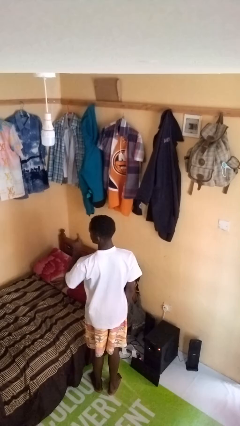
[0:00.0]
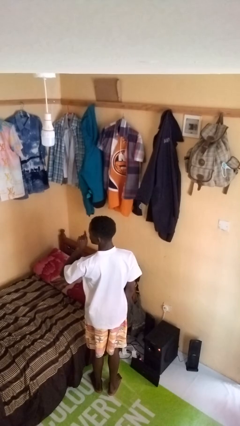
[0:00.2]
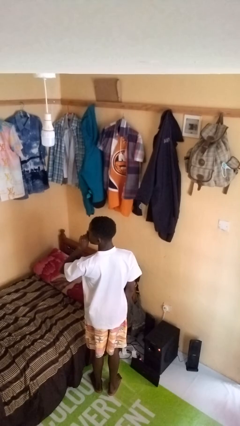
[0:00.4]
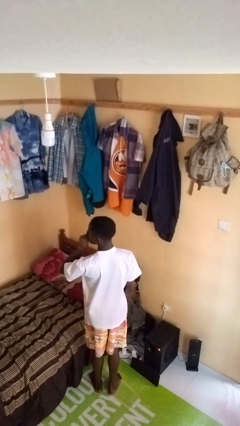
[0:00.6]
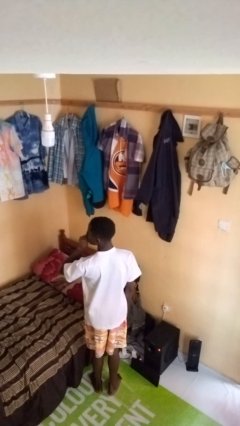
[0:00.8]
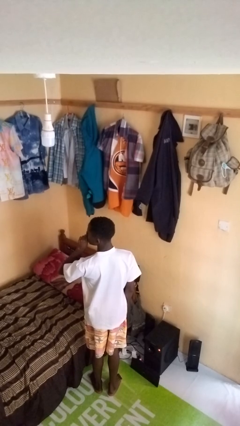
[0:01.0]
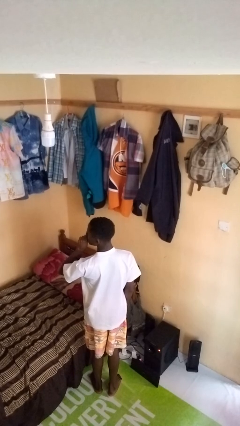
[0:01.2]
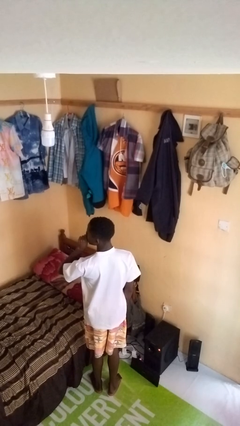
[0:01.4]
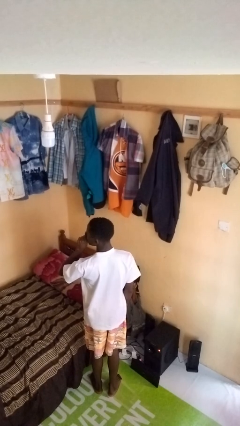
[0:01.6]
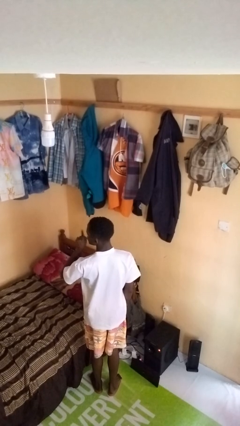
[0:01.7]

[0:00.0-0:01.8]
person gestures be quiet

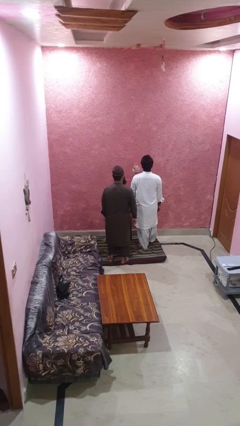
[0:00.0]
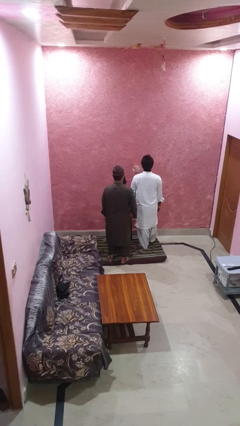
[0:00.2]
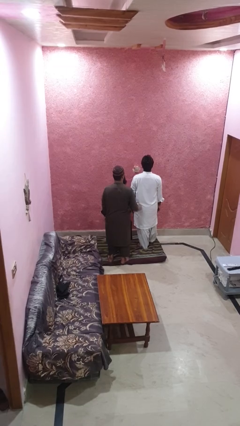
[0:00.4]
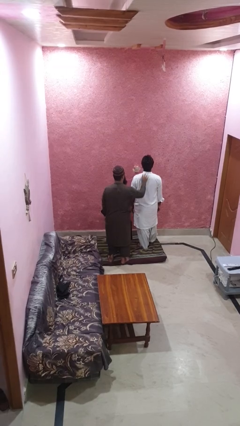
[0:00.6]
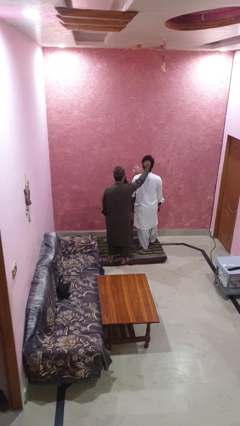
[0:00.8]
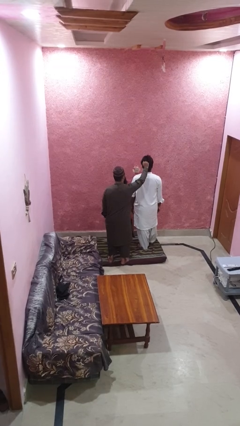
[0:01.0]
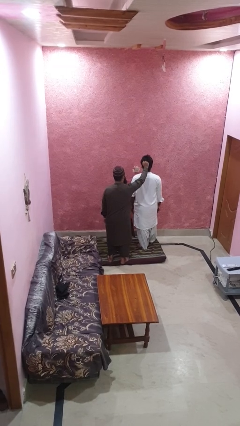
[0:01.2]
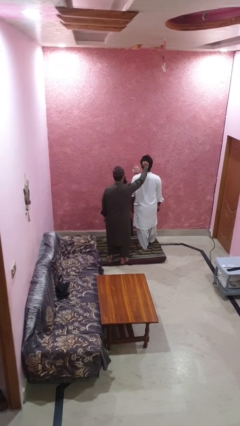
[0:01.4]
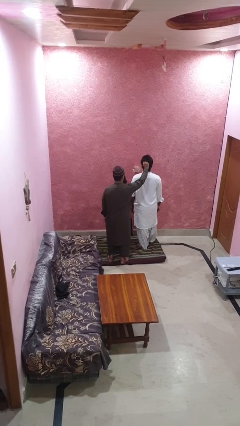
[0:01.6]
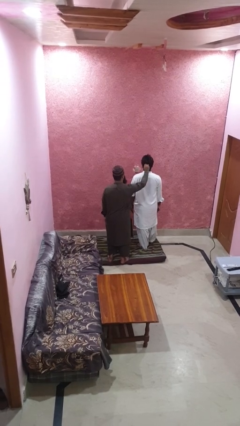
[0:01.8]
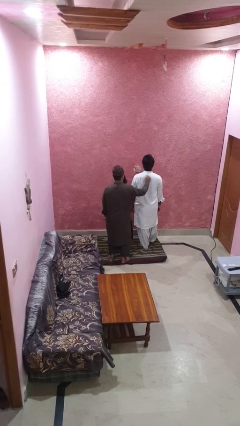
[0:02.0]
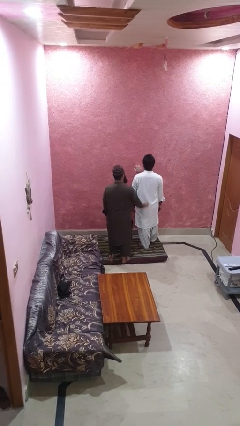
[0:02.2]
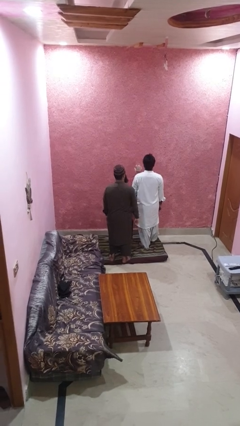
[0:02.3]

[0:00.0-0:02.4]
person grabs person by hair

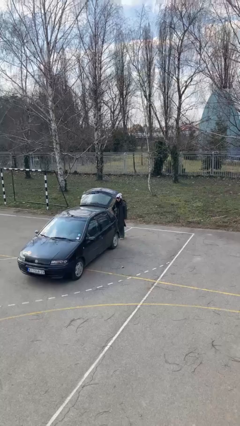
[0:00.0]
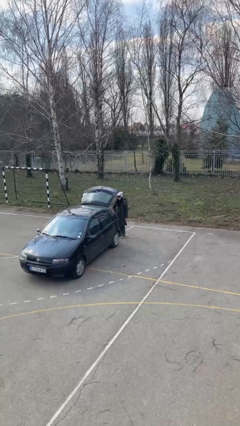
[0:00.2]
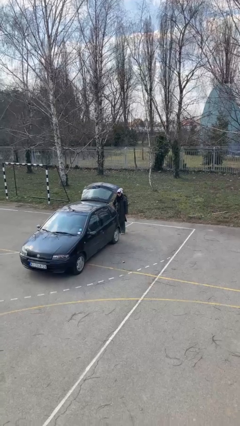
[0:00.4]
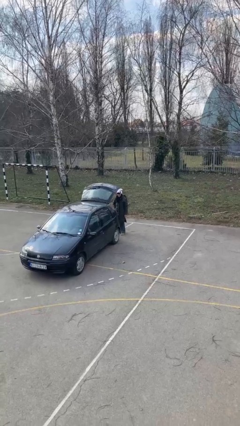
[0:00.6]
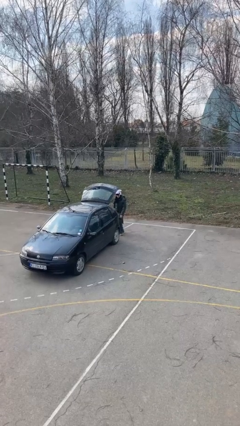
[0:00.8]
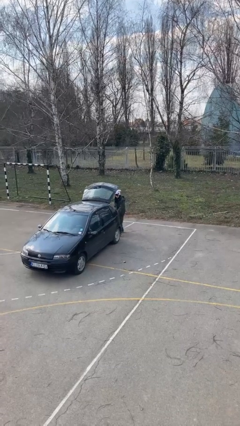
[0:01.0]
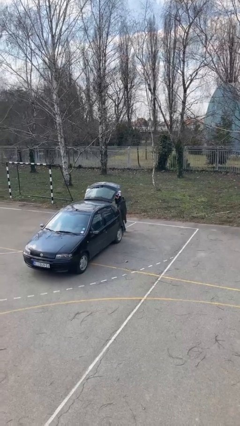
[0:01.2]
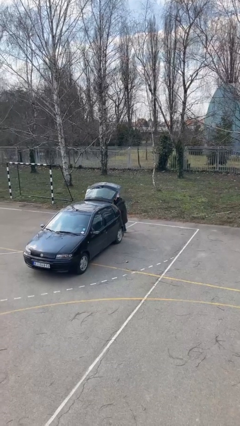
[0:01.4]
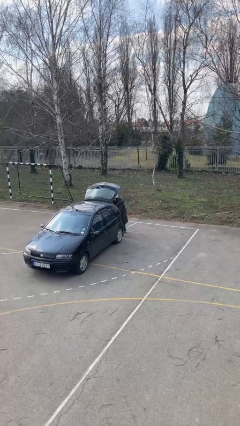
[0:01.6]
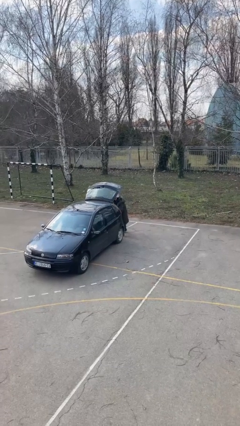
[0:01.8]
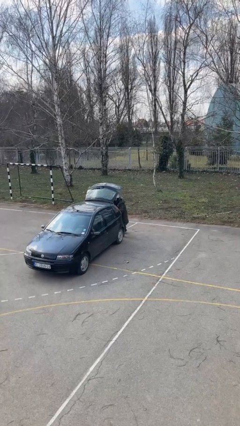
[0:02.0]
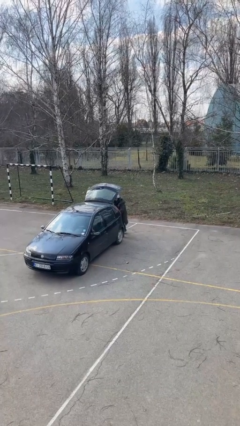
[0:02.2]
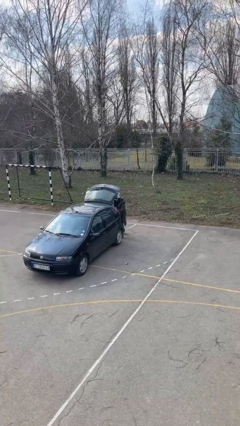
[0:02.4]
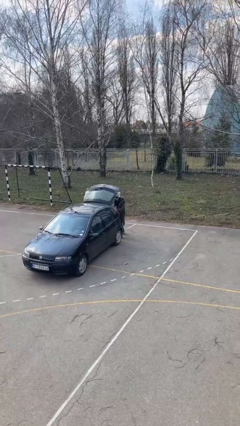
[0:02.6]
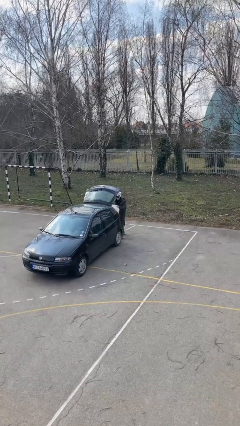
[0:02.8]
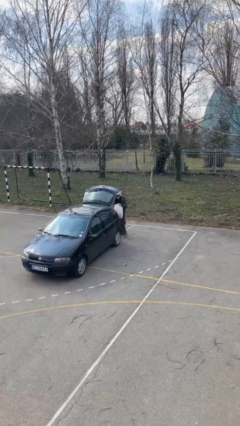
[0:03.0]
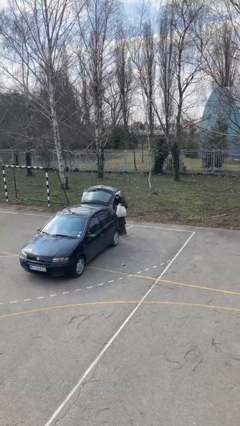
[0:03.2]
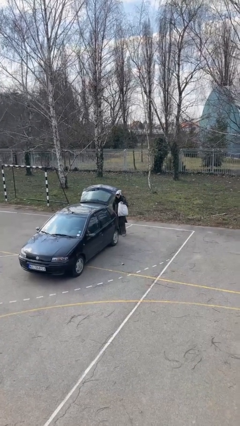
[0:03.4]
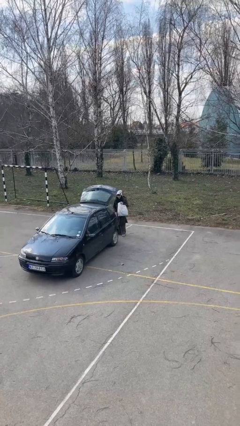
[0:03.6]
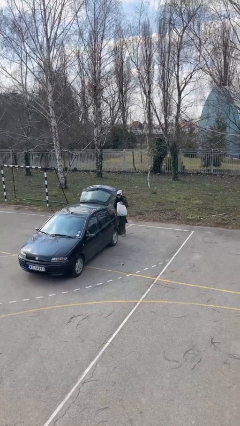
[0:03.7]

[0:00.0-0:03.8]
person unloads car

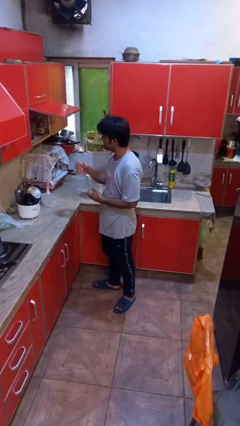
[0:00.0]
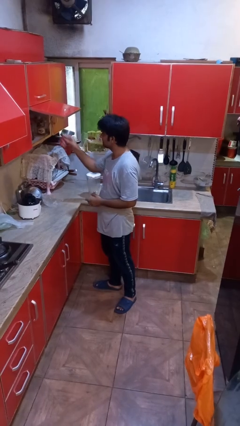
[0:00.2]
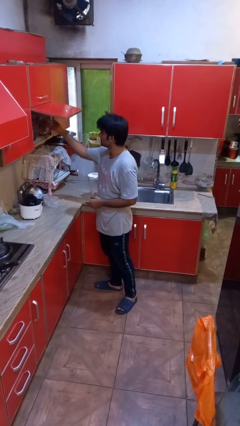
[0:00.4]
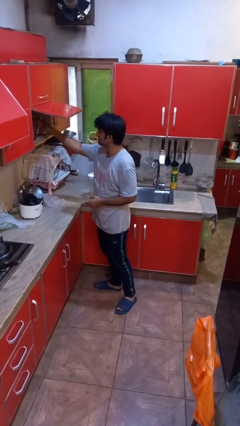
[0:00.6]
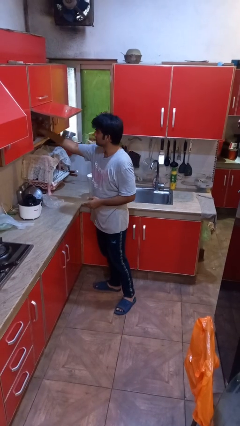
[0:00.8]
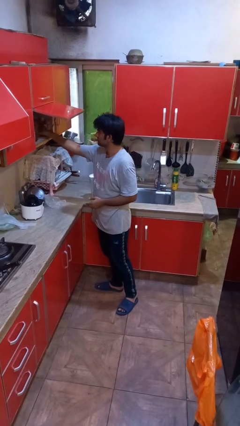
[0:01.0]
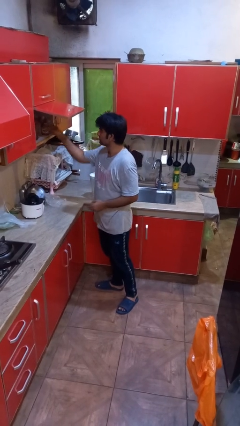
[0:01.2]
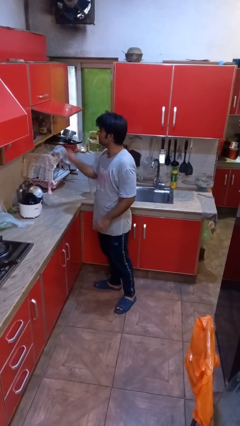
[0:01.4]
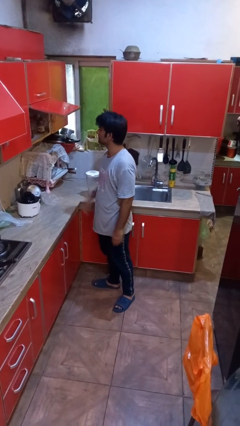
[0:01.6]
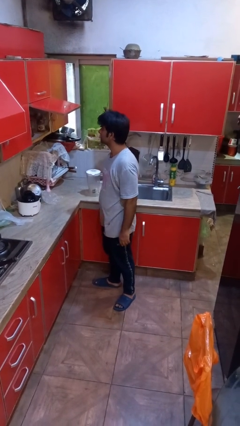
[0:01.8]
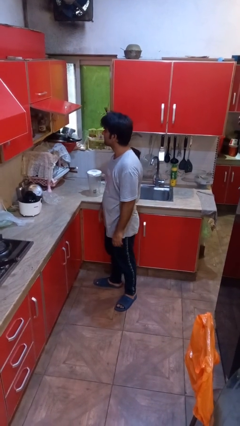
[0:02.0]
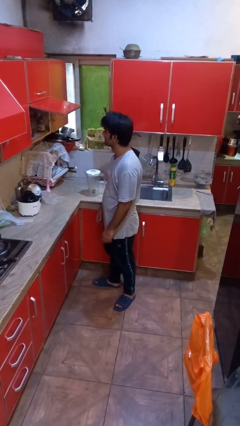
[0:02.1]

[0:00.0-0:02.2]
person puts down object into cabinet

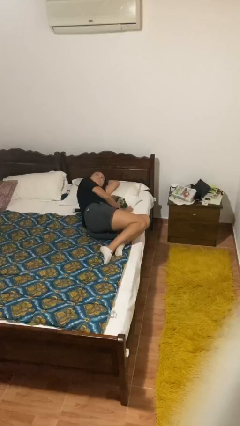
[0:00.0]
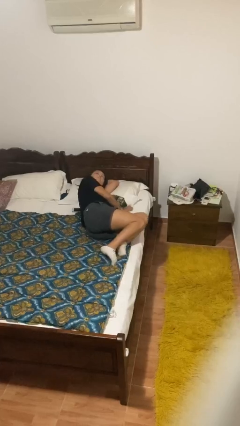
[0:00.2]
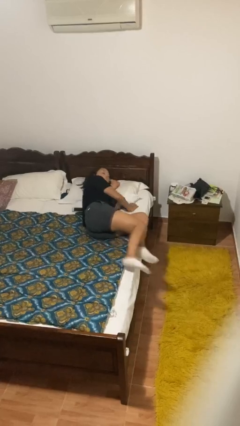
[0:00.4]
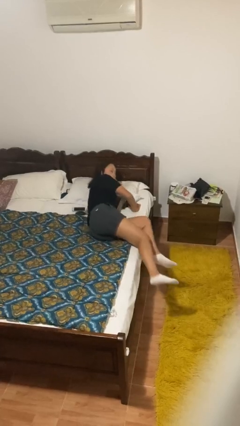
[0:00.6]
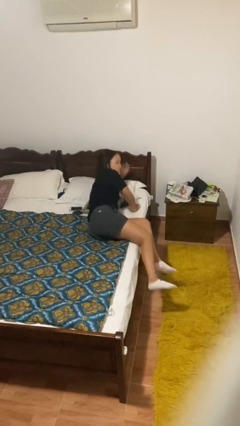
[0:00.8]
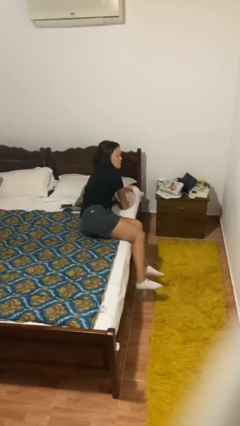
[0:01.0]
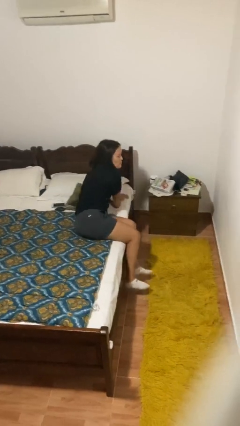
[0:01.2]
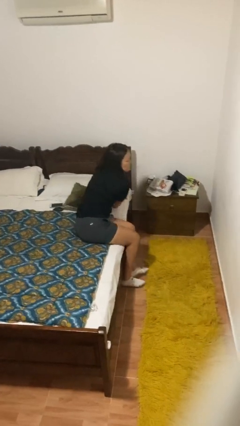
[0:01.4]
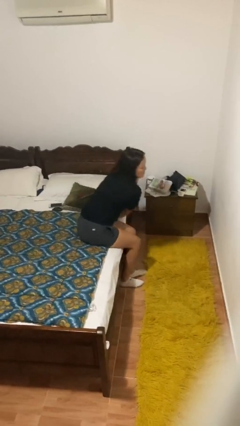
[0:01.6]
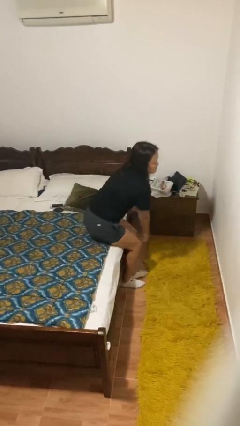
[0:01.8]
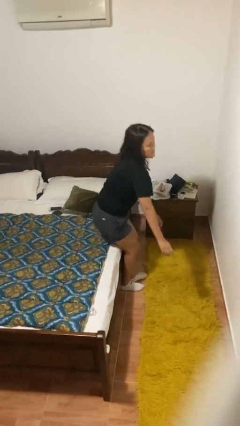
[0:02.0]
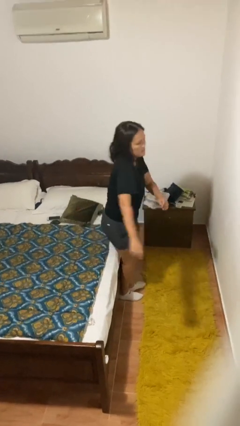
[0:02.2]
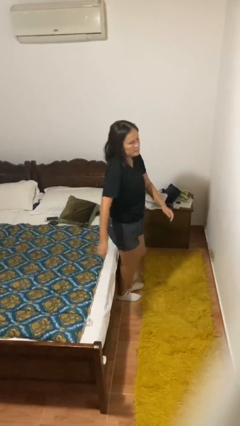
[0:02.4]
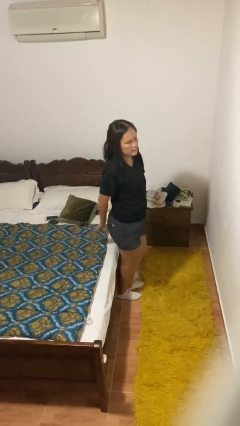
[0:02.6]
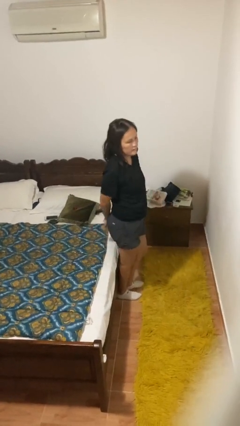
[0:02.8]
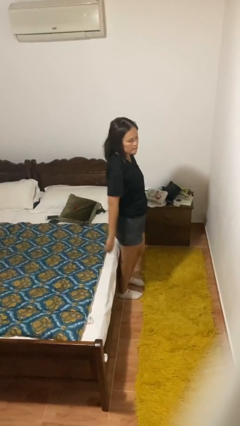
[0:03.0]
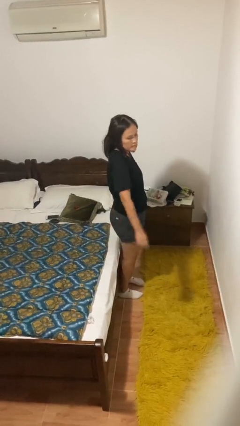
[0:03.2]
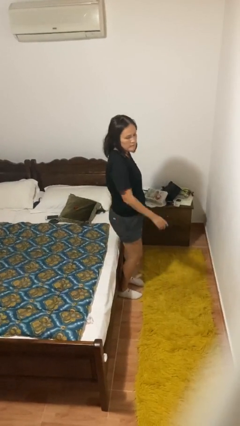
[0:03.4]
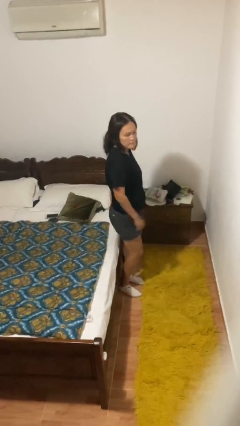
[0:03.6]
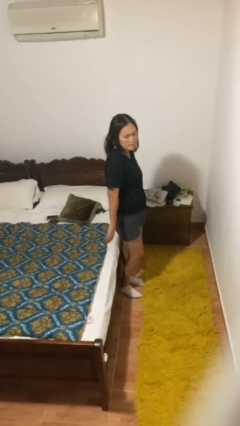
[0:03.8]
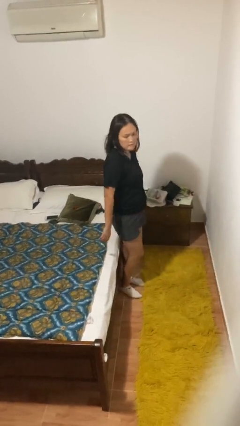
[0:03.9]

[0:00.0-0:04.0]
person stands up

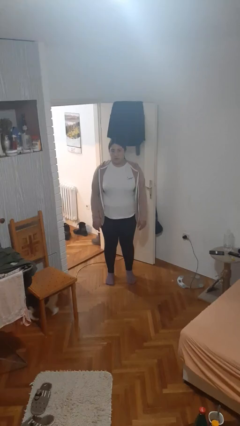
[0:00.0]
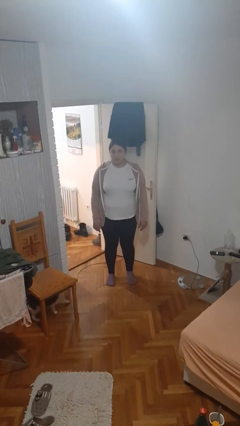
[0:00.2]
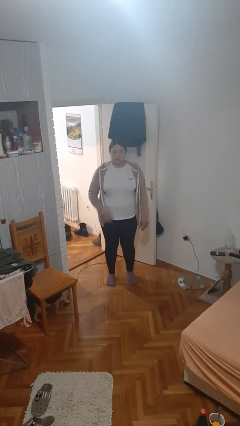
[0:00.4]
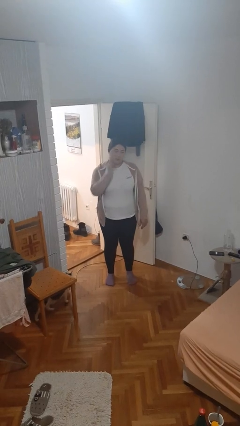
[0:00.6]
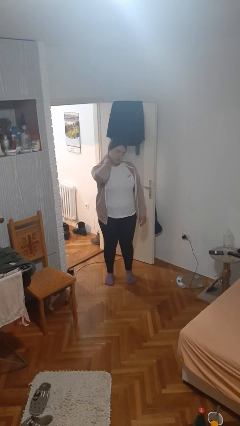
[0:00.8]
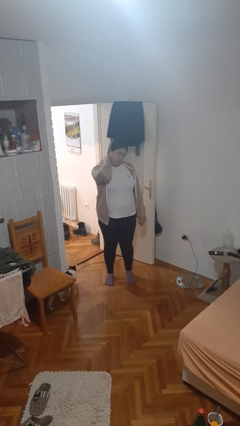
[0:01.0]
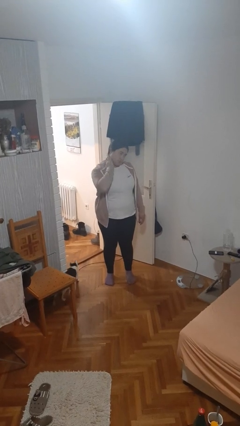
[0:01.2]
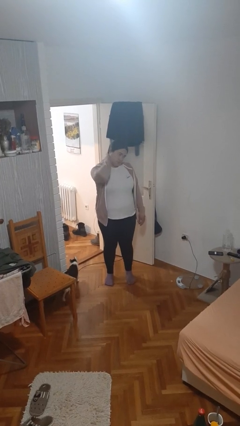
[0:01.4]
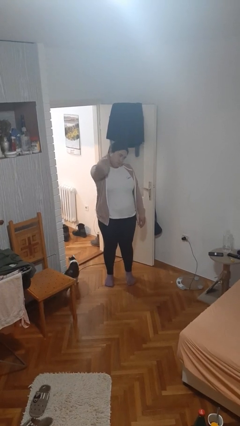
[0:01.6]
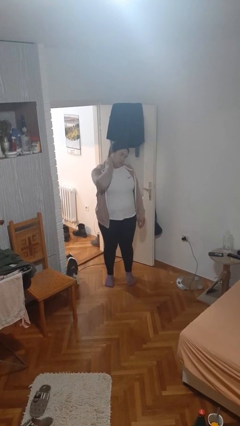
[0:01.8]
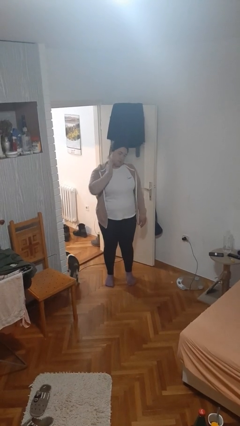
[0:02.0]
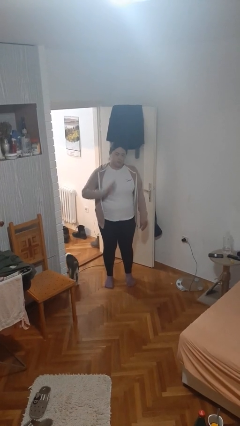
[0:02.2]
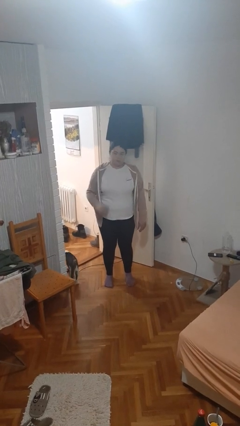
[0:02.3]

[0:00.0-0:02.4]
person rubs neck

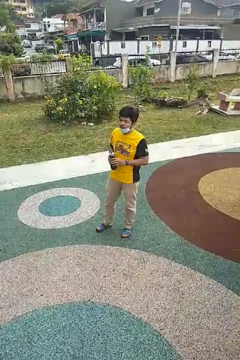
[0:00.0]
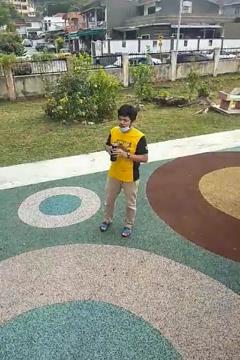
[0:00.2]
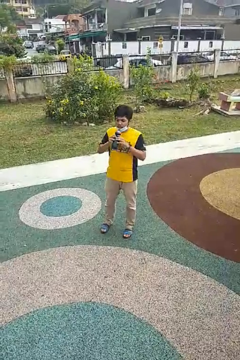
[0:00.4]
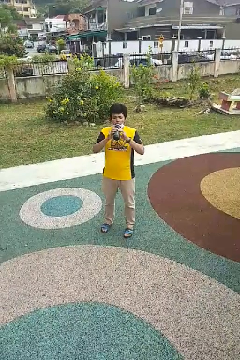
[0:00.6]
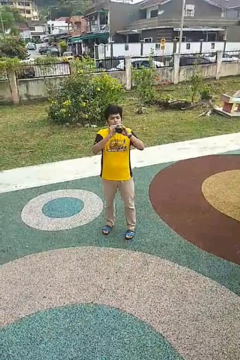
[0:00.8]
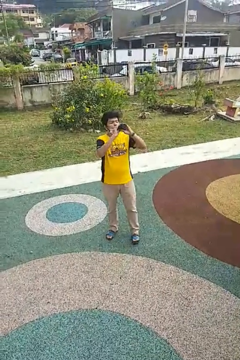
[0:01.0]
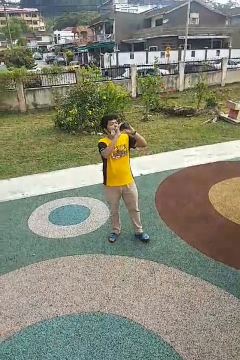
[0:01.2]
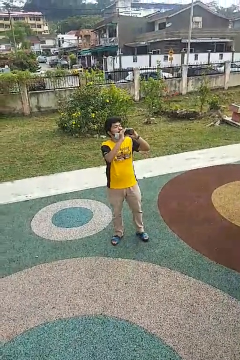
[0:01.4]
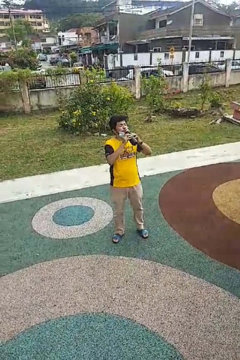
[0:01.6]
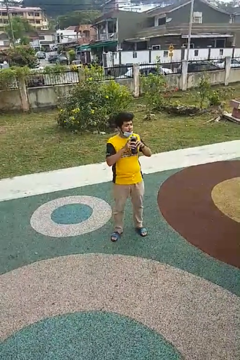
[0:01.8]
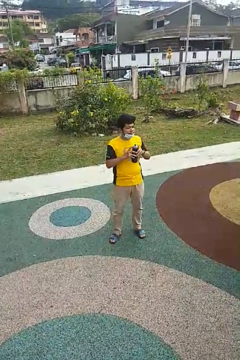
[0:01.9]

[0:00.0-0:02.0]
person drinks from bottle
